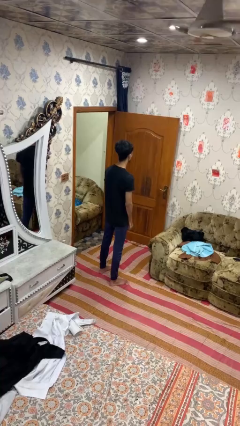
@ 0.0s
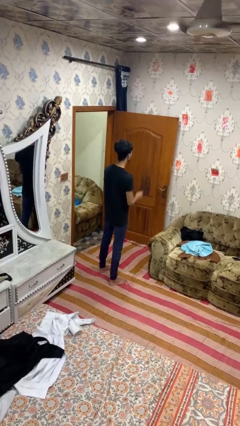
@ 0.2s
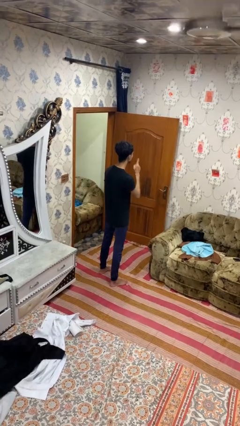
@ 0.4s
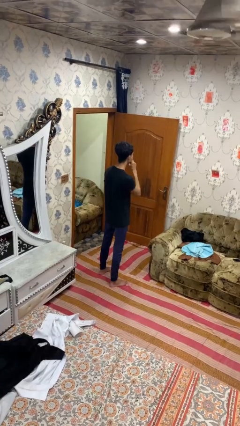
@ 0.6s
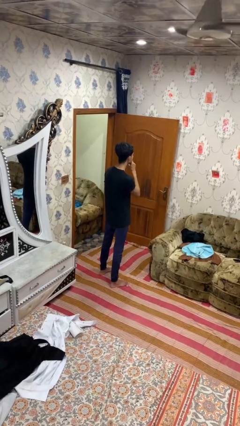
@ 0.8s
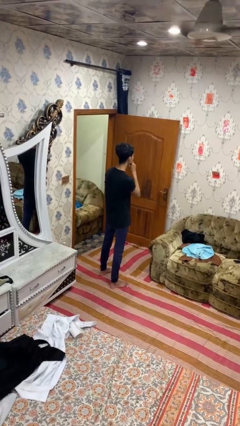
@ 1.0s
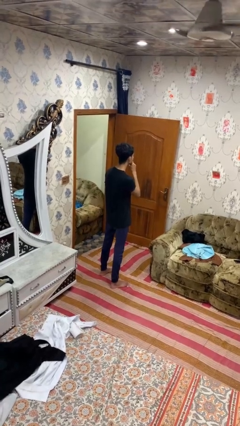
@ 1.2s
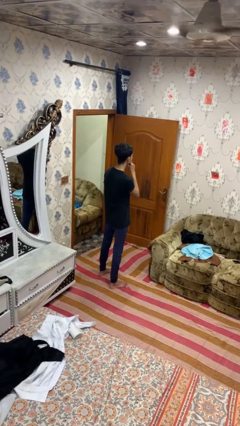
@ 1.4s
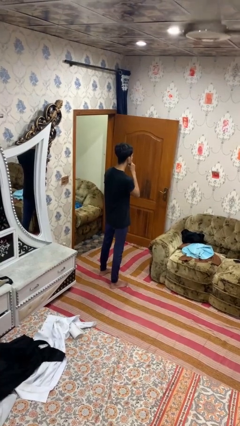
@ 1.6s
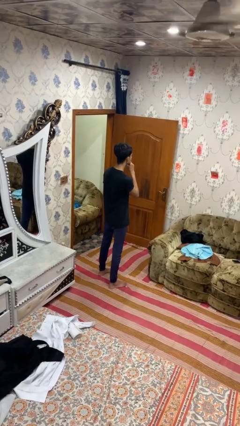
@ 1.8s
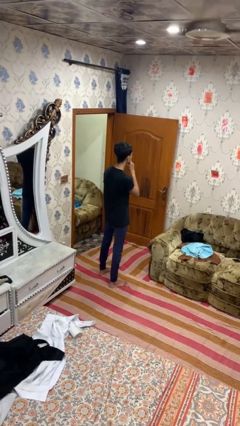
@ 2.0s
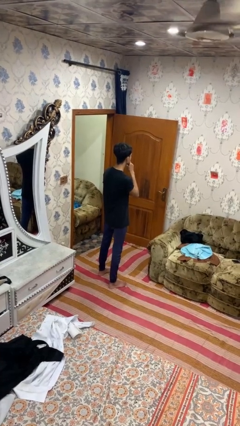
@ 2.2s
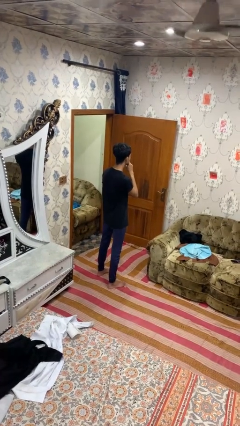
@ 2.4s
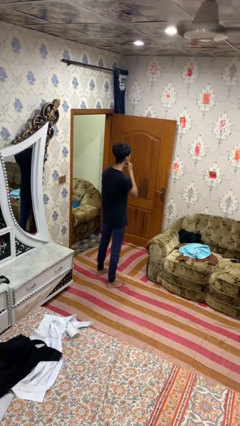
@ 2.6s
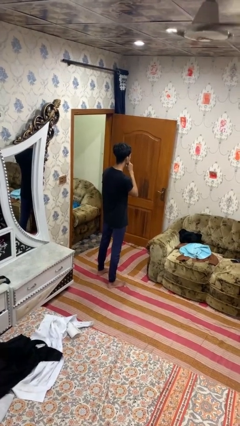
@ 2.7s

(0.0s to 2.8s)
person gestures be quiet

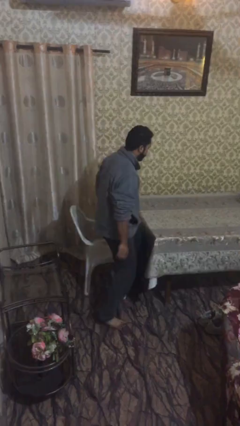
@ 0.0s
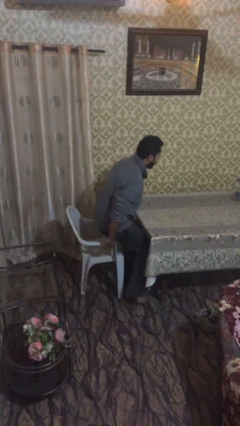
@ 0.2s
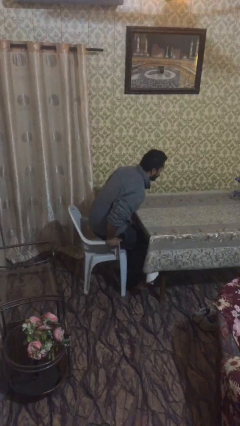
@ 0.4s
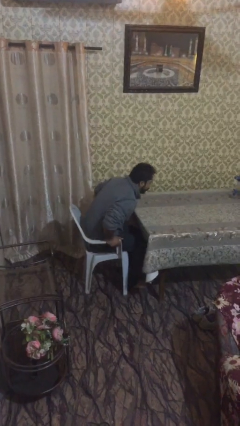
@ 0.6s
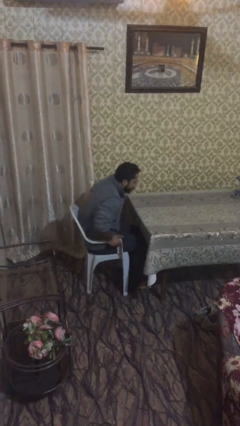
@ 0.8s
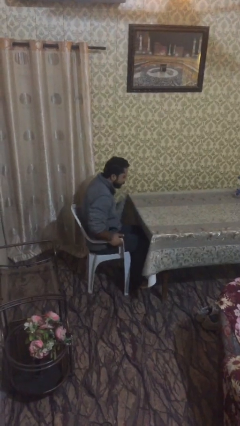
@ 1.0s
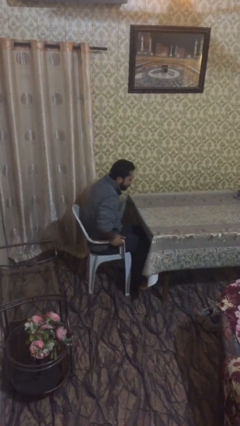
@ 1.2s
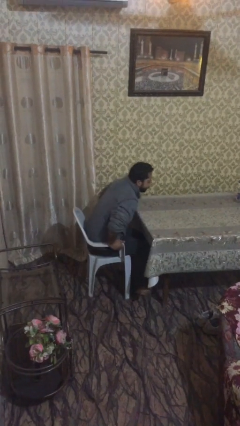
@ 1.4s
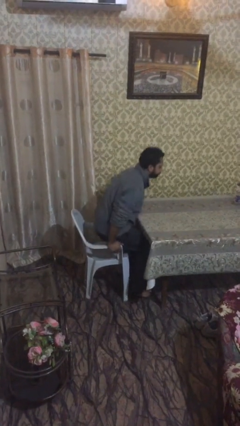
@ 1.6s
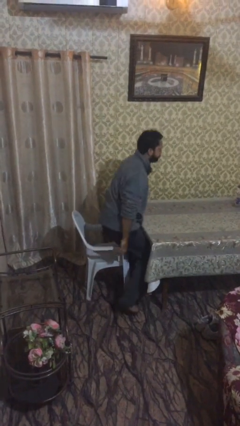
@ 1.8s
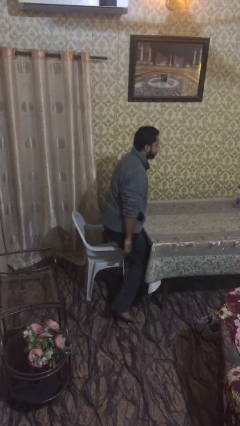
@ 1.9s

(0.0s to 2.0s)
person sits down

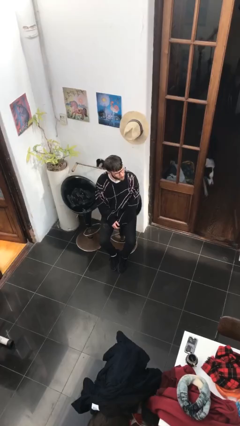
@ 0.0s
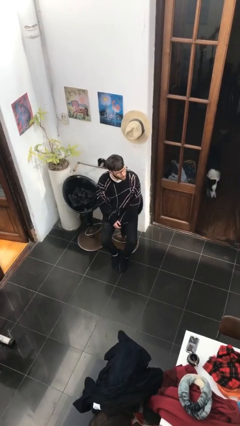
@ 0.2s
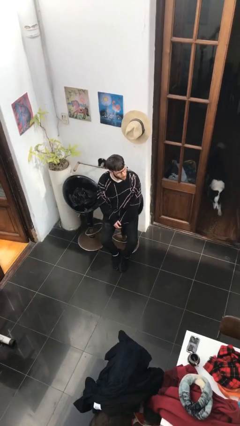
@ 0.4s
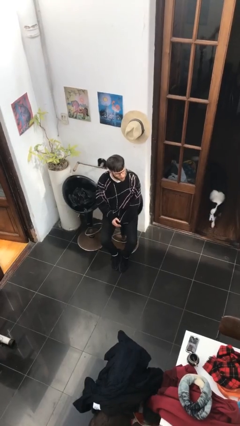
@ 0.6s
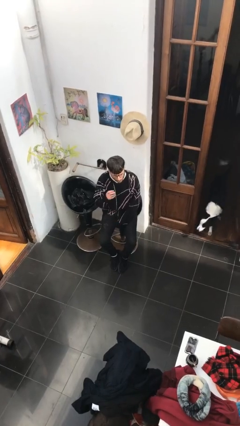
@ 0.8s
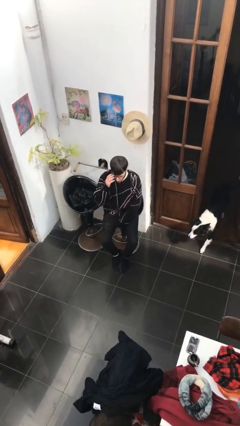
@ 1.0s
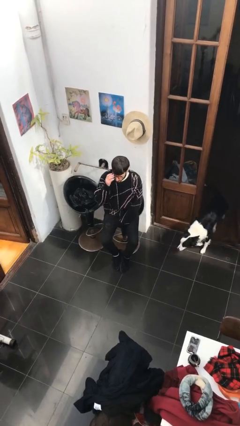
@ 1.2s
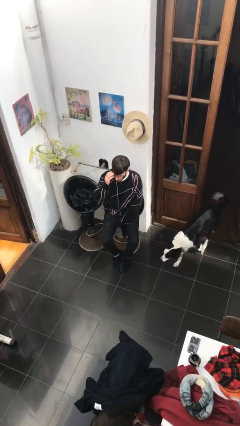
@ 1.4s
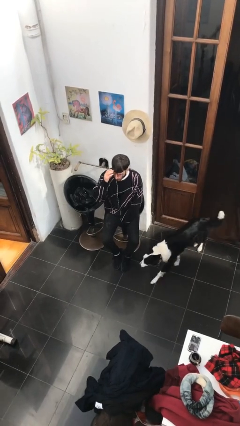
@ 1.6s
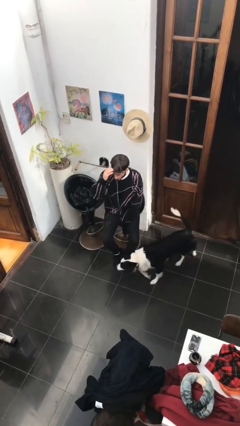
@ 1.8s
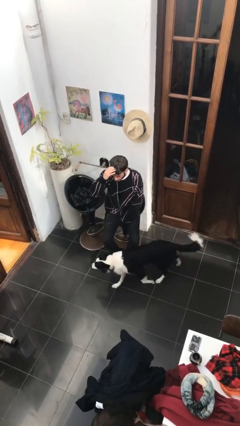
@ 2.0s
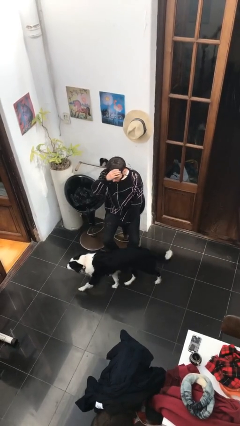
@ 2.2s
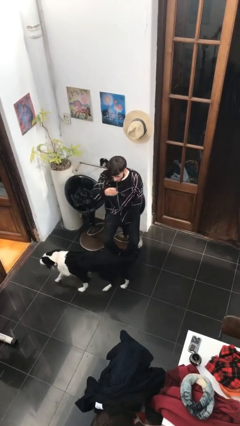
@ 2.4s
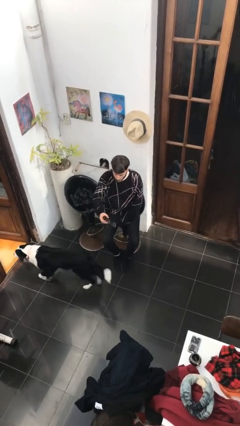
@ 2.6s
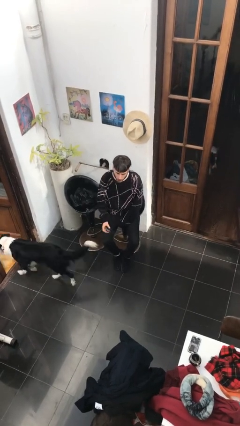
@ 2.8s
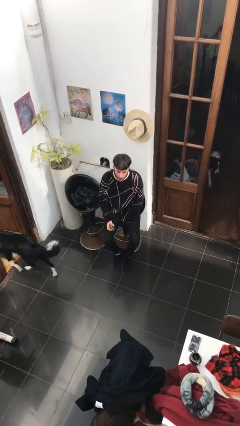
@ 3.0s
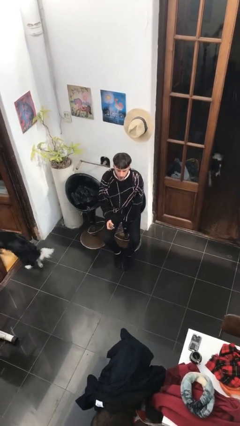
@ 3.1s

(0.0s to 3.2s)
person takes off glasses

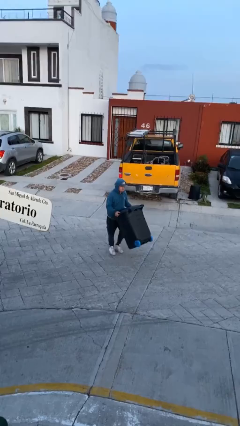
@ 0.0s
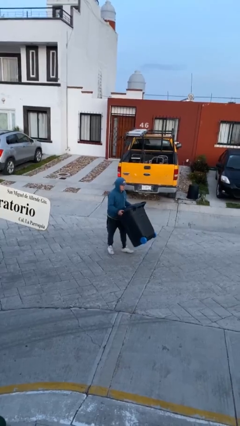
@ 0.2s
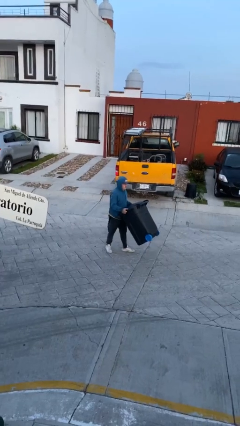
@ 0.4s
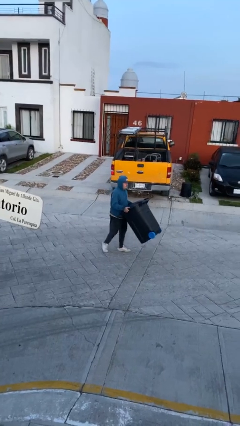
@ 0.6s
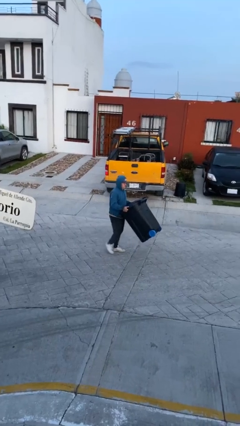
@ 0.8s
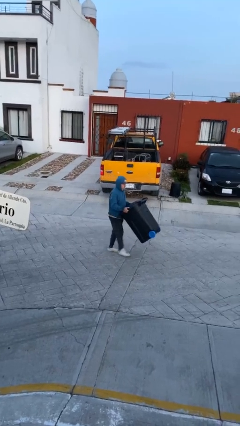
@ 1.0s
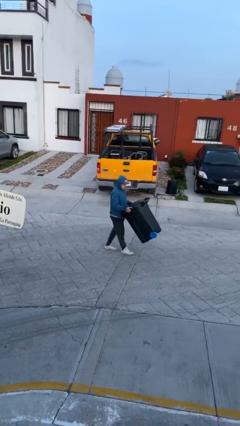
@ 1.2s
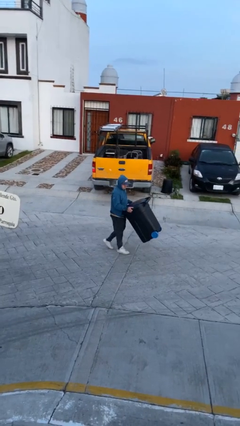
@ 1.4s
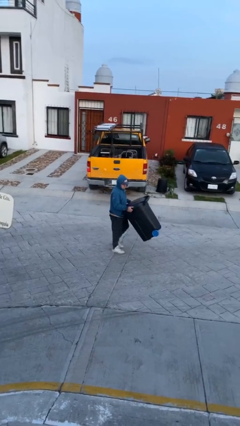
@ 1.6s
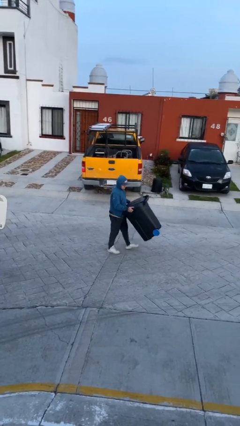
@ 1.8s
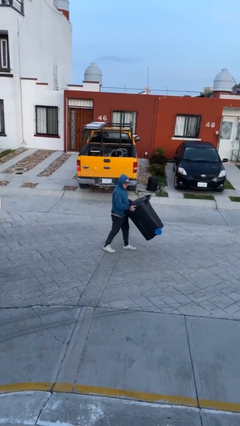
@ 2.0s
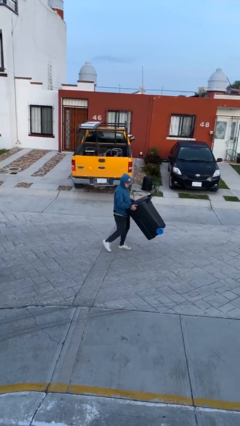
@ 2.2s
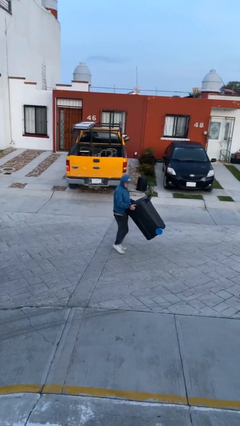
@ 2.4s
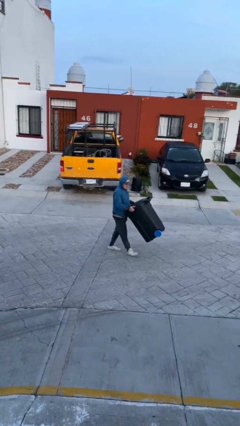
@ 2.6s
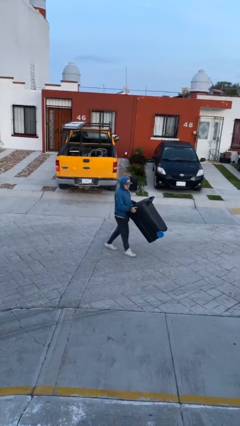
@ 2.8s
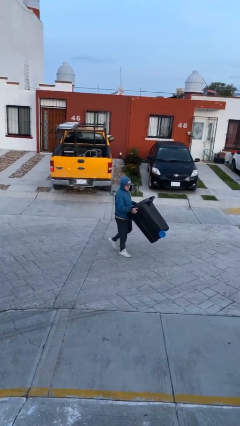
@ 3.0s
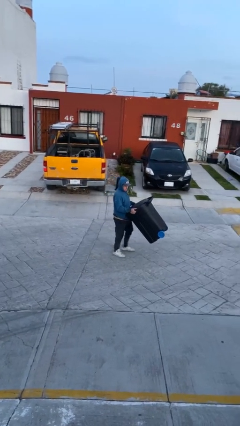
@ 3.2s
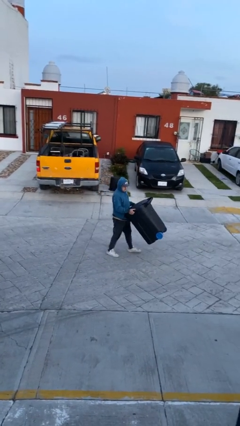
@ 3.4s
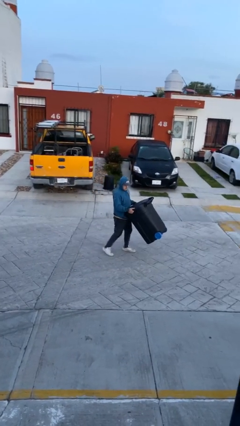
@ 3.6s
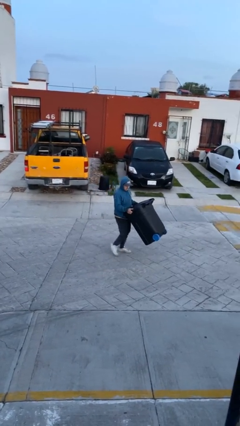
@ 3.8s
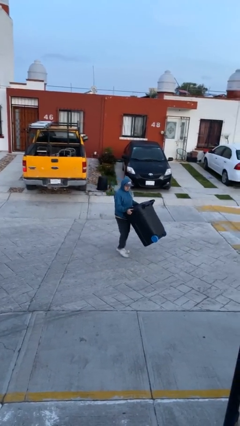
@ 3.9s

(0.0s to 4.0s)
person carries heavy object

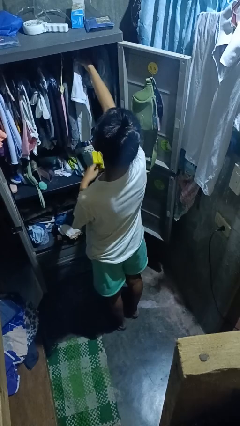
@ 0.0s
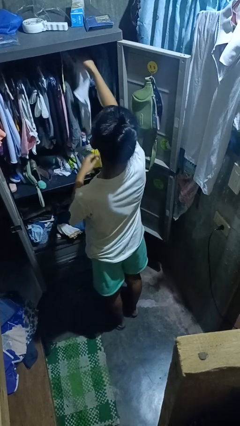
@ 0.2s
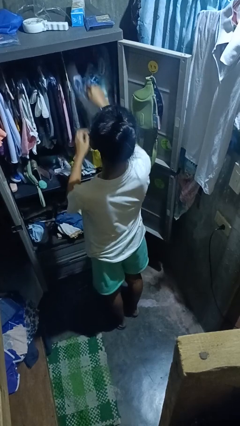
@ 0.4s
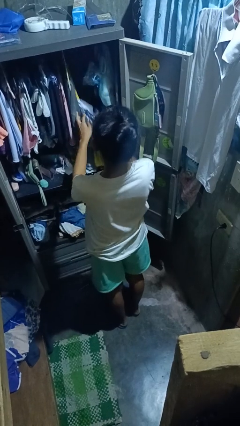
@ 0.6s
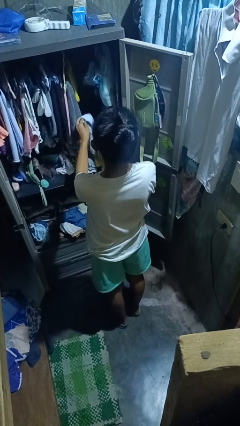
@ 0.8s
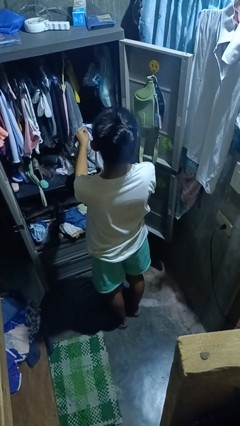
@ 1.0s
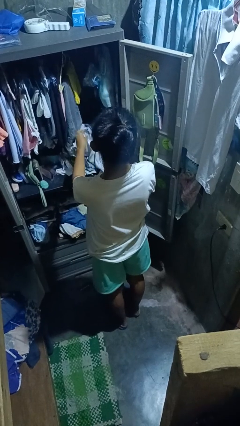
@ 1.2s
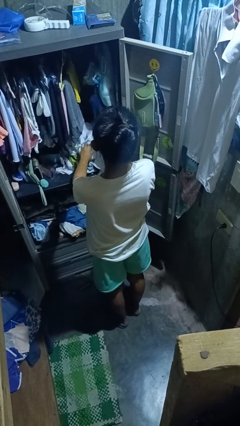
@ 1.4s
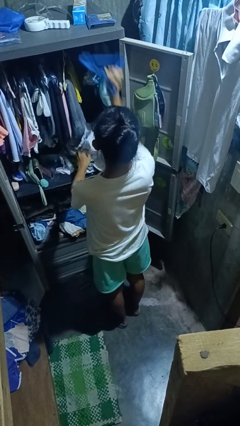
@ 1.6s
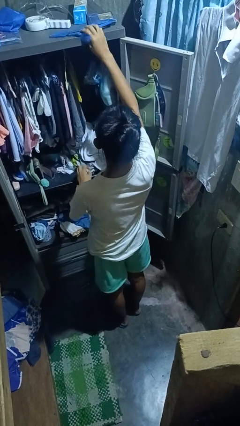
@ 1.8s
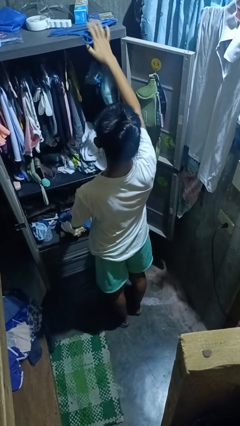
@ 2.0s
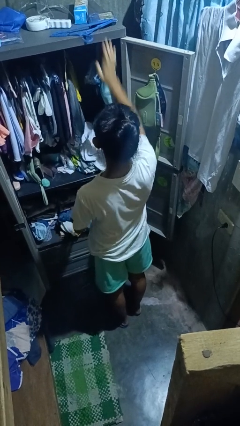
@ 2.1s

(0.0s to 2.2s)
person takes clothes from closet

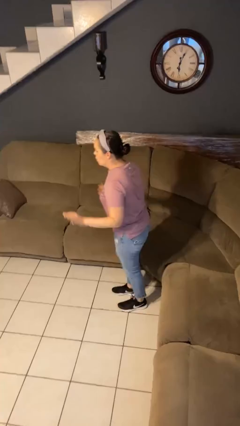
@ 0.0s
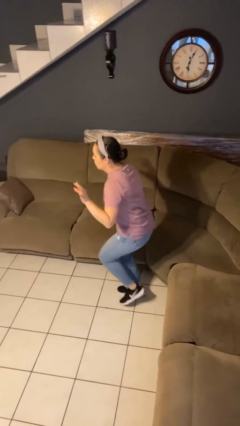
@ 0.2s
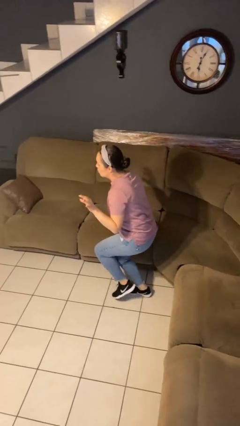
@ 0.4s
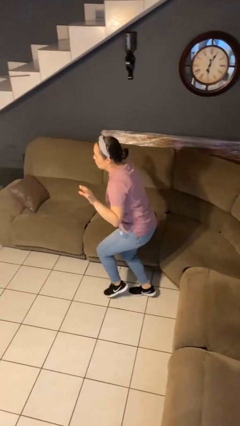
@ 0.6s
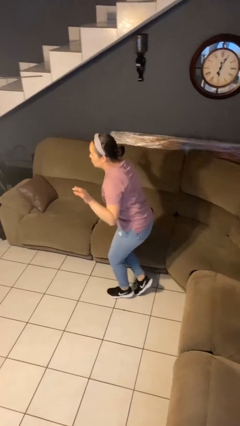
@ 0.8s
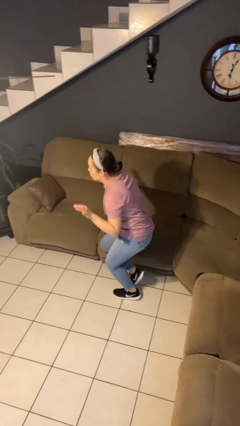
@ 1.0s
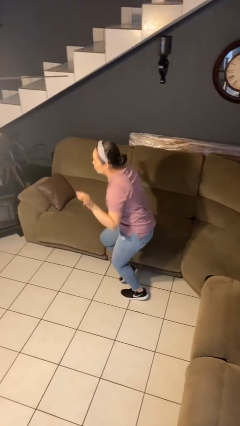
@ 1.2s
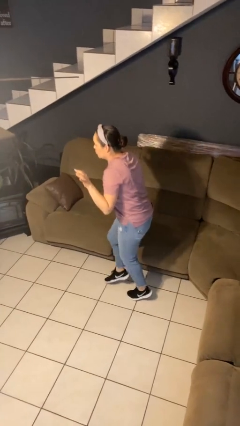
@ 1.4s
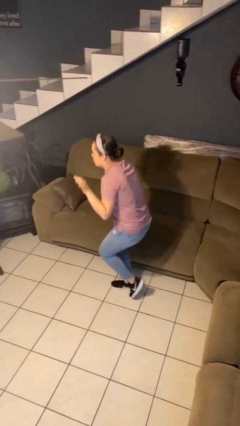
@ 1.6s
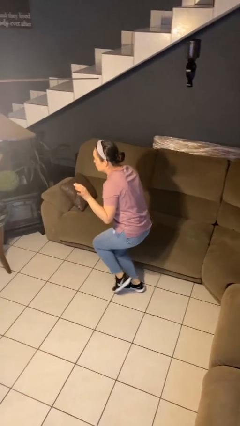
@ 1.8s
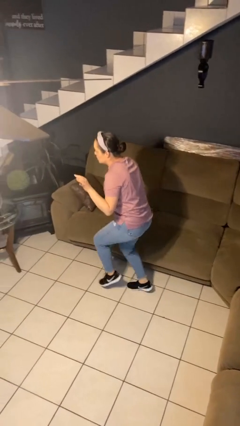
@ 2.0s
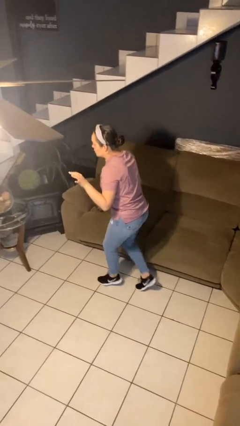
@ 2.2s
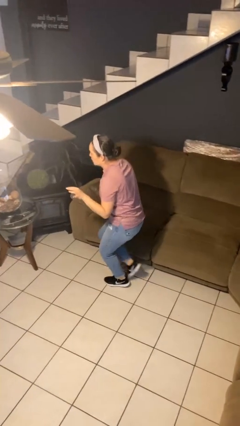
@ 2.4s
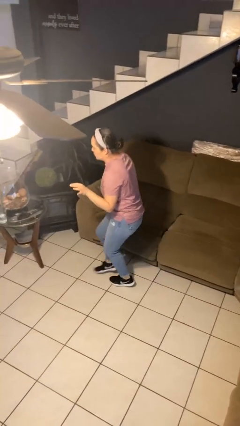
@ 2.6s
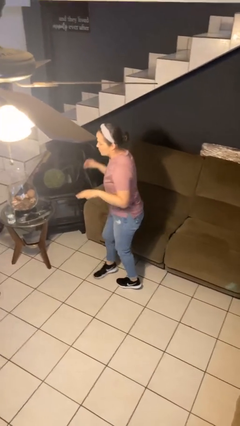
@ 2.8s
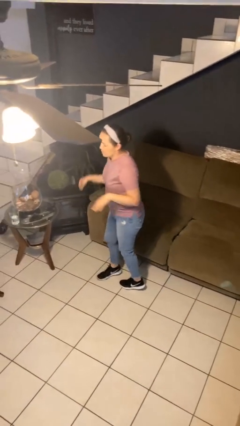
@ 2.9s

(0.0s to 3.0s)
person walks tiptoe
